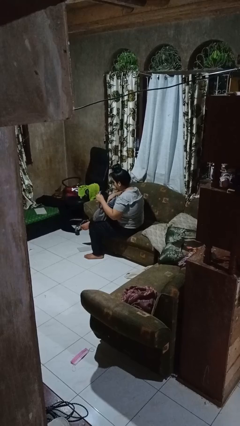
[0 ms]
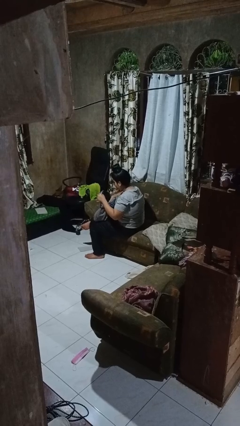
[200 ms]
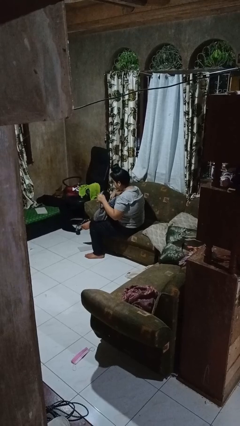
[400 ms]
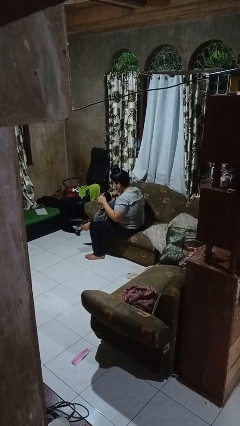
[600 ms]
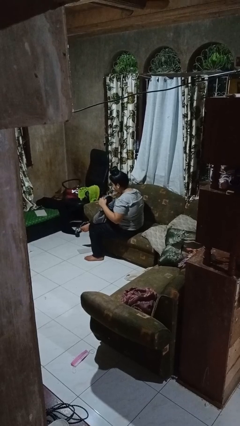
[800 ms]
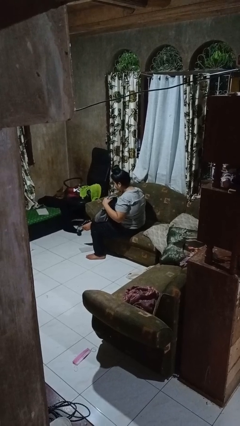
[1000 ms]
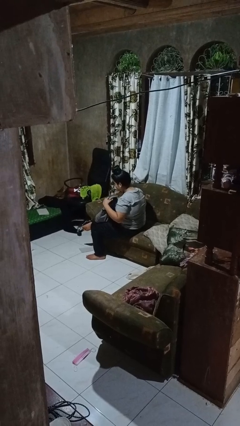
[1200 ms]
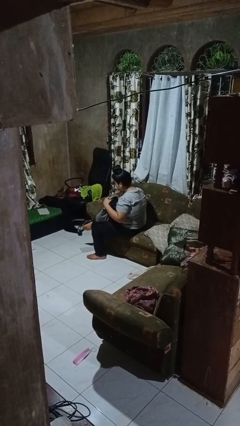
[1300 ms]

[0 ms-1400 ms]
person puts object into backpack

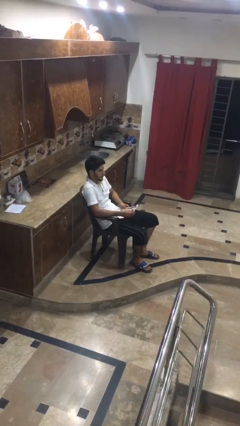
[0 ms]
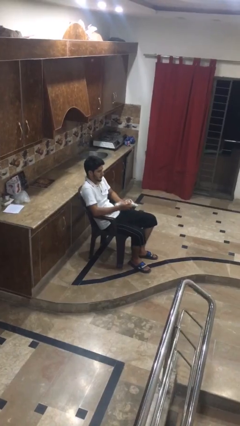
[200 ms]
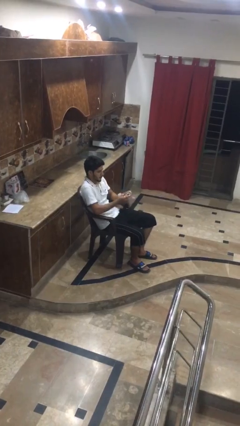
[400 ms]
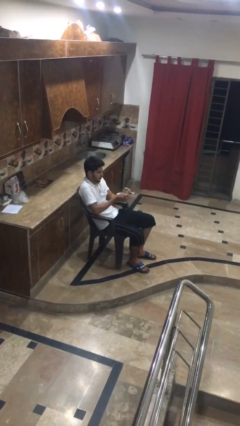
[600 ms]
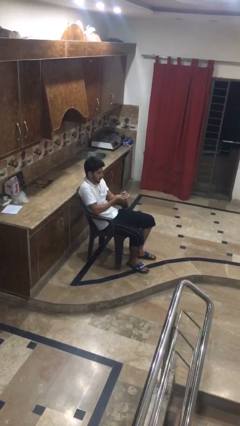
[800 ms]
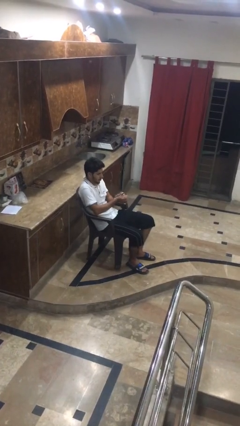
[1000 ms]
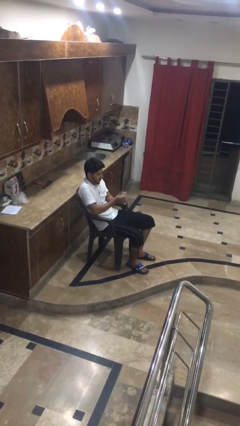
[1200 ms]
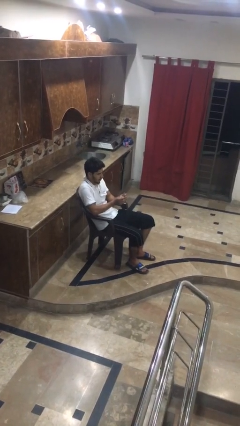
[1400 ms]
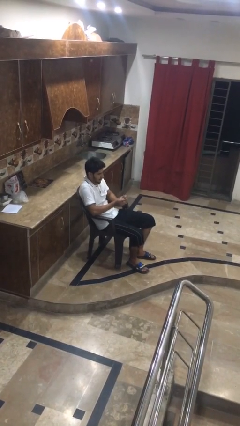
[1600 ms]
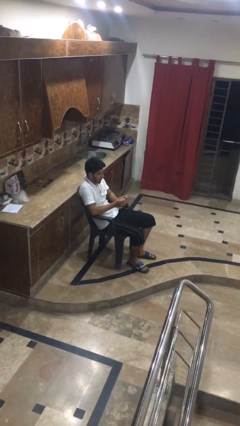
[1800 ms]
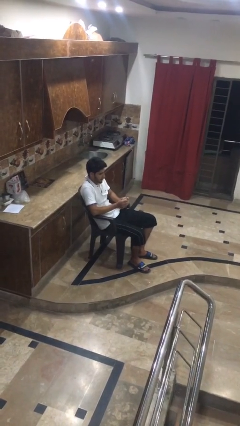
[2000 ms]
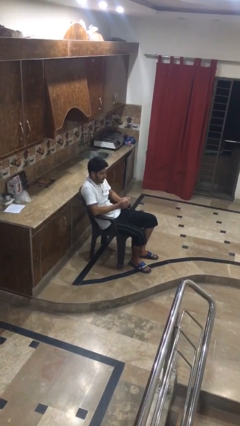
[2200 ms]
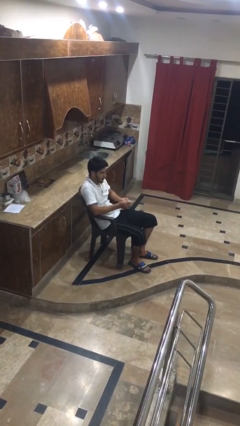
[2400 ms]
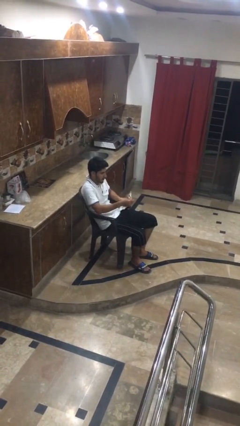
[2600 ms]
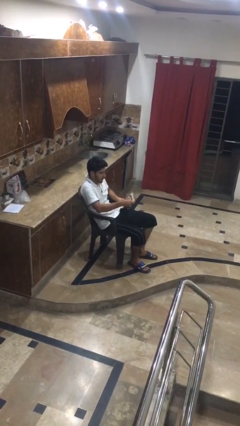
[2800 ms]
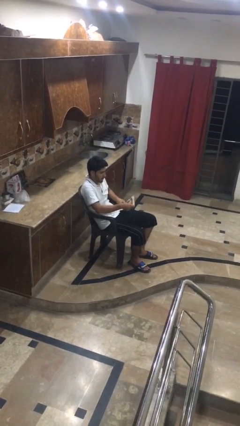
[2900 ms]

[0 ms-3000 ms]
person crumples paper

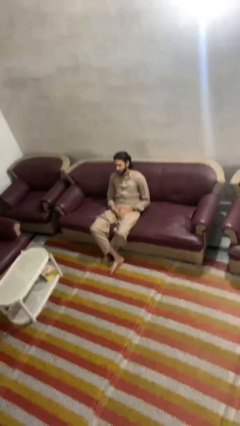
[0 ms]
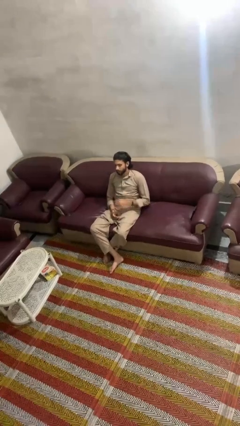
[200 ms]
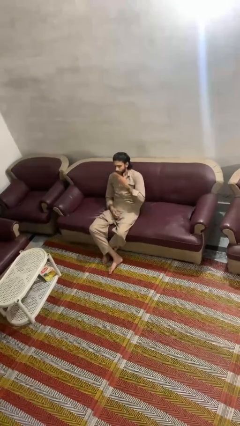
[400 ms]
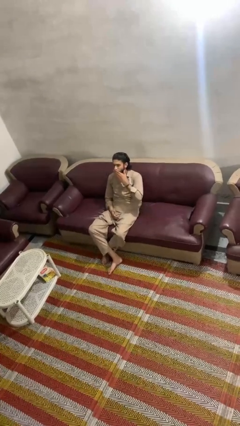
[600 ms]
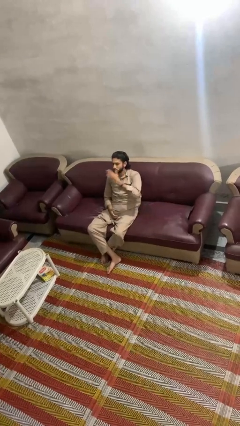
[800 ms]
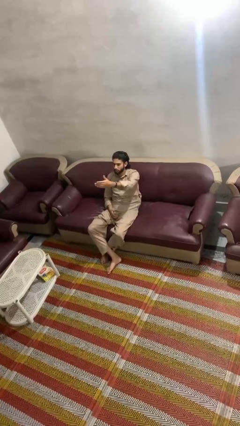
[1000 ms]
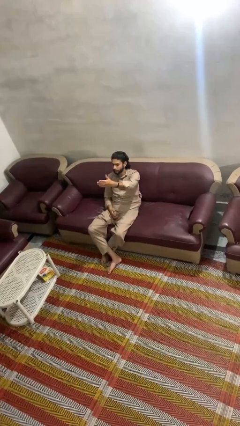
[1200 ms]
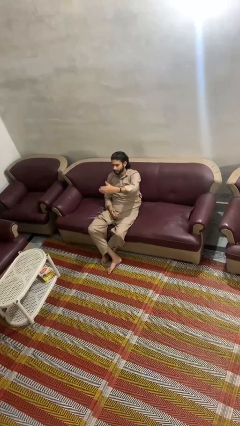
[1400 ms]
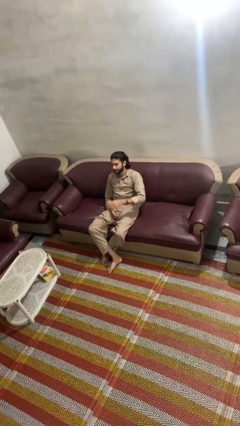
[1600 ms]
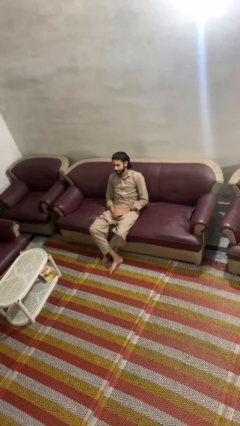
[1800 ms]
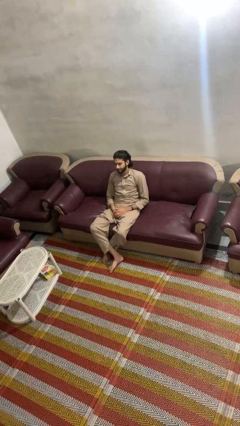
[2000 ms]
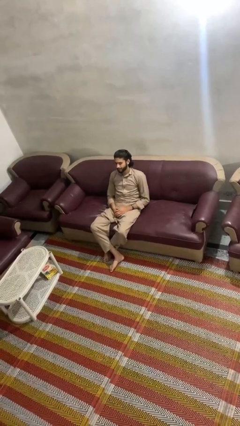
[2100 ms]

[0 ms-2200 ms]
person gestures blow kiss

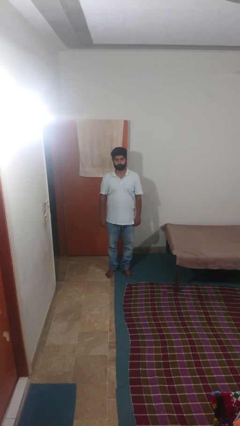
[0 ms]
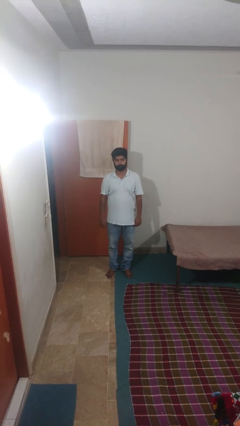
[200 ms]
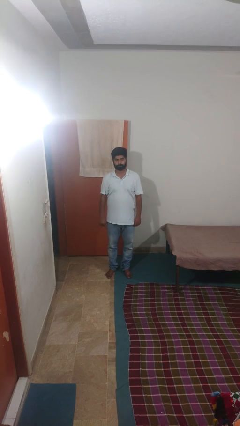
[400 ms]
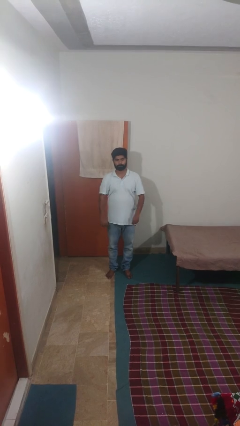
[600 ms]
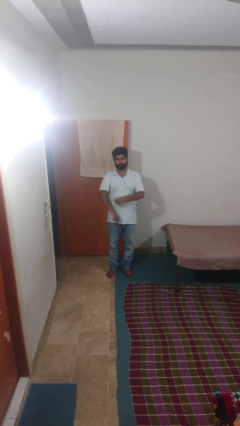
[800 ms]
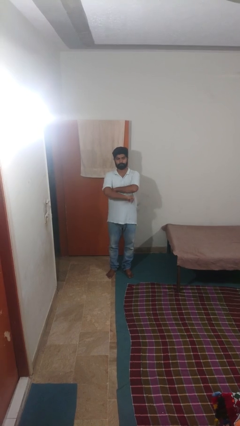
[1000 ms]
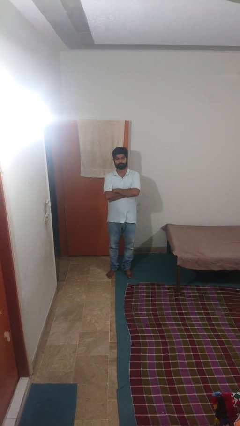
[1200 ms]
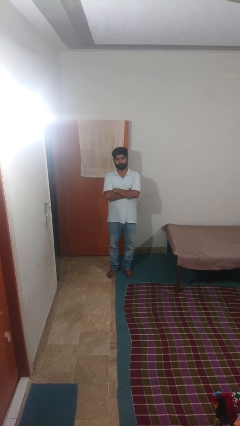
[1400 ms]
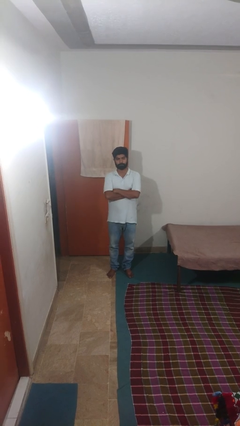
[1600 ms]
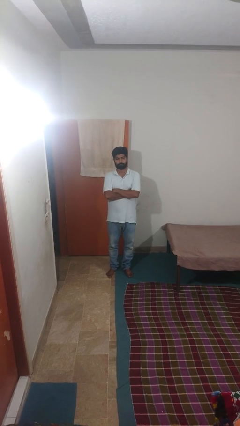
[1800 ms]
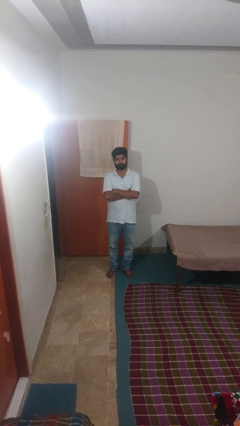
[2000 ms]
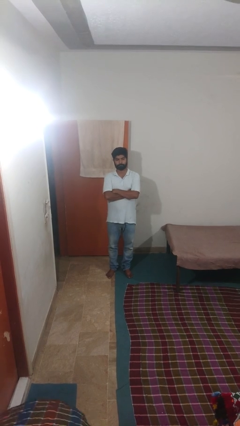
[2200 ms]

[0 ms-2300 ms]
person crosses arms

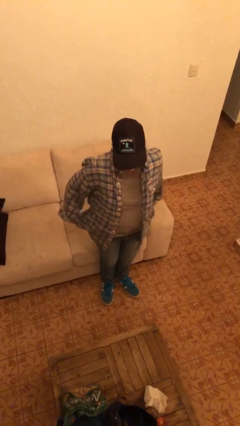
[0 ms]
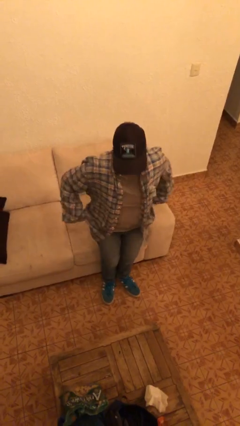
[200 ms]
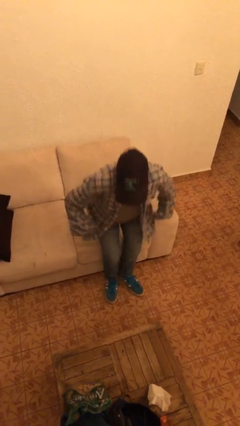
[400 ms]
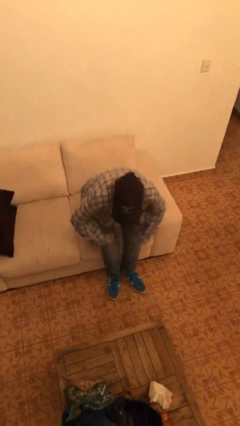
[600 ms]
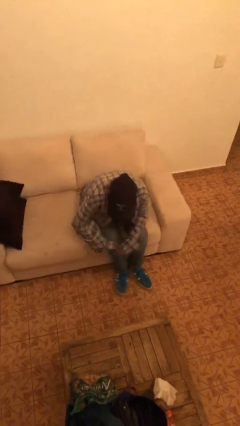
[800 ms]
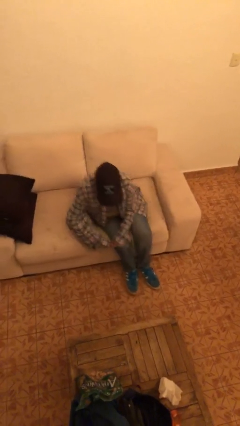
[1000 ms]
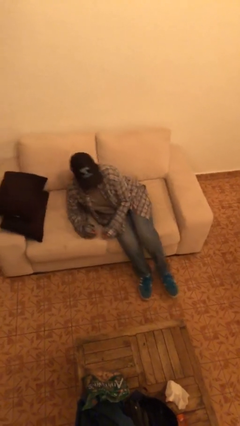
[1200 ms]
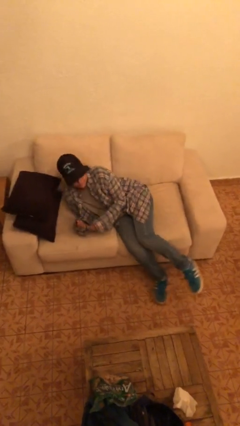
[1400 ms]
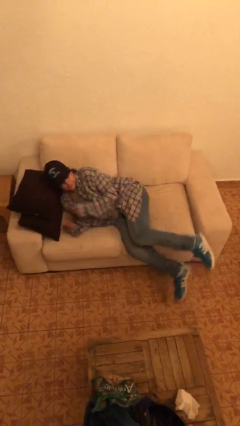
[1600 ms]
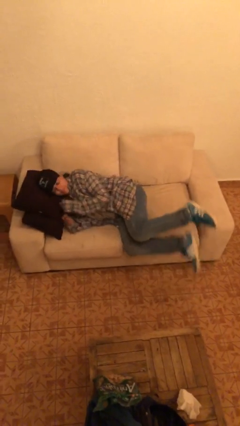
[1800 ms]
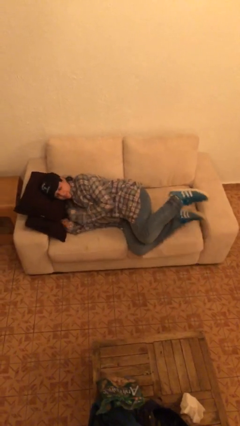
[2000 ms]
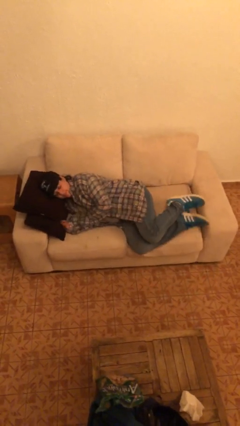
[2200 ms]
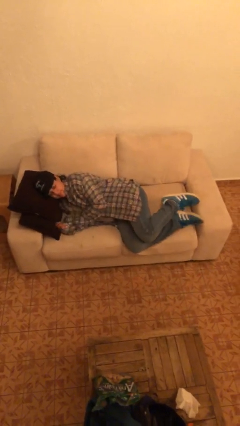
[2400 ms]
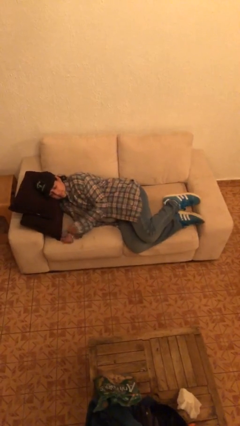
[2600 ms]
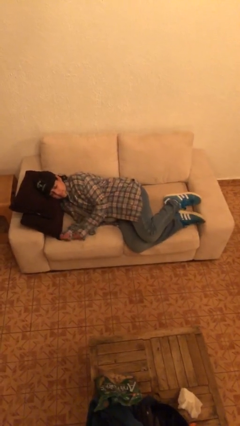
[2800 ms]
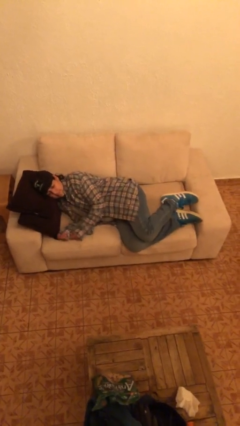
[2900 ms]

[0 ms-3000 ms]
person lies down on couch

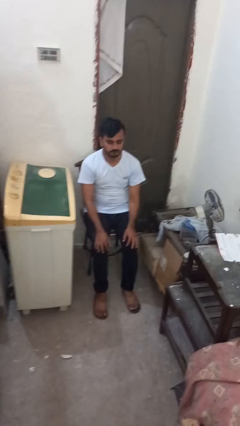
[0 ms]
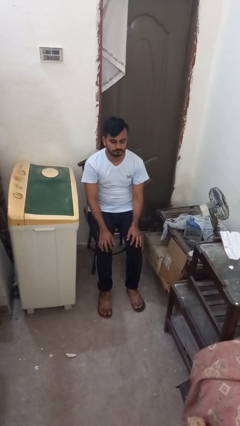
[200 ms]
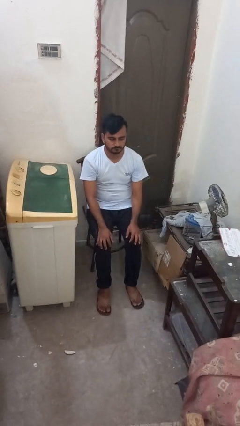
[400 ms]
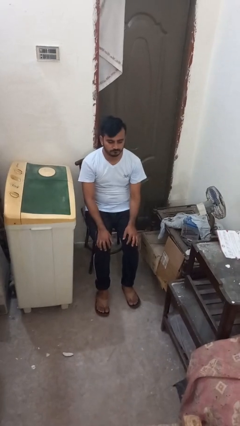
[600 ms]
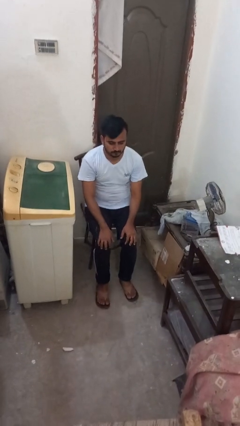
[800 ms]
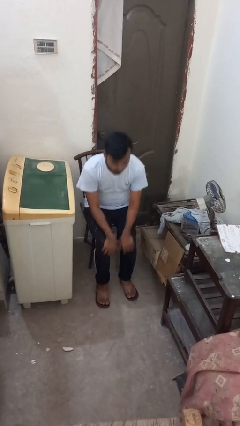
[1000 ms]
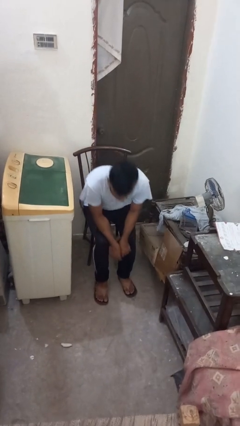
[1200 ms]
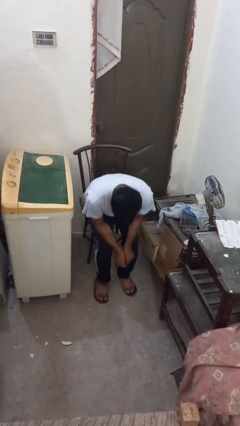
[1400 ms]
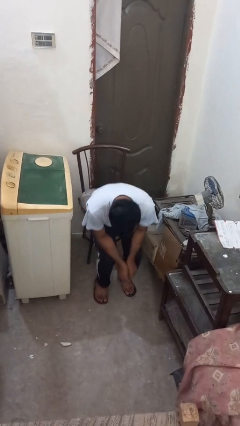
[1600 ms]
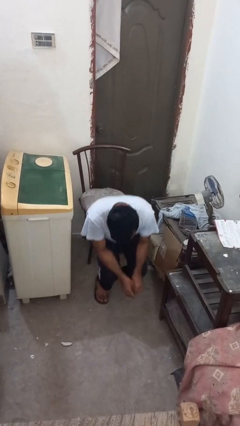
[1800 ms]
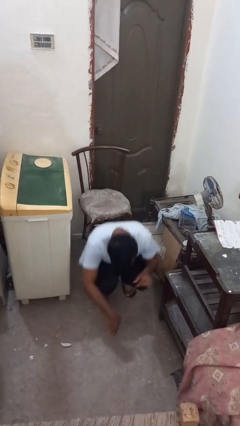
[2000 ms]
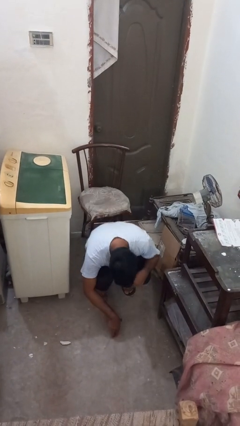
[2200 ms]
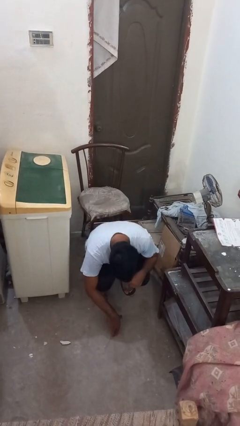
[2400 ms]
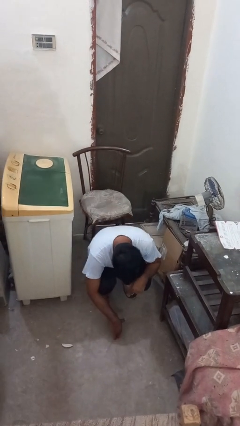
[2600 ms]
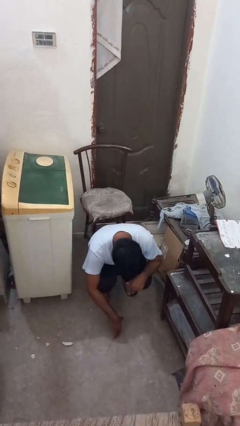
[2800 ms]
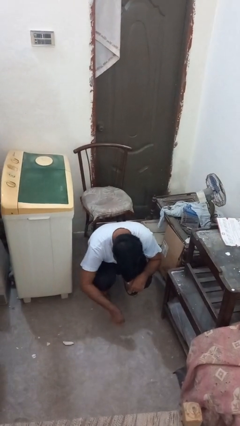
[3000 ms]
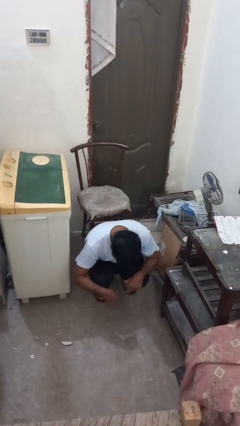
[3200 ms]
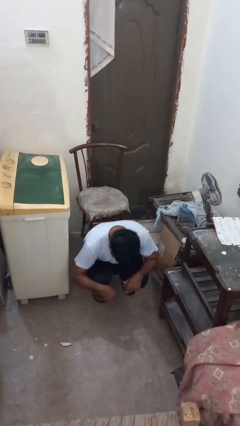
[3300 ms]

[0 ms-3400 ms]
person falls from chair

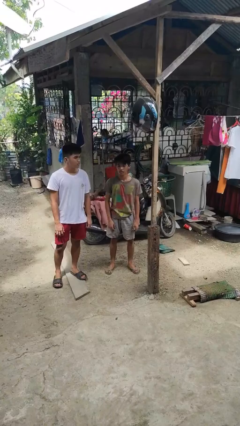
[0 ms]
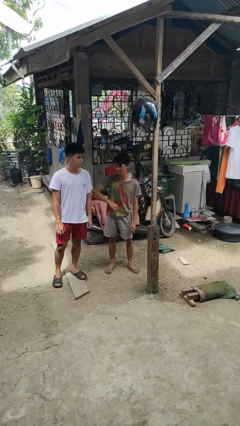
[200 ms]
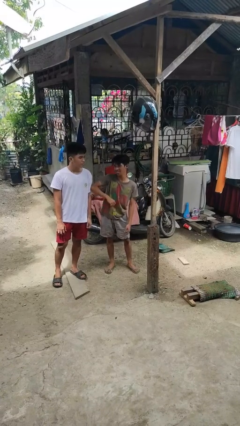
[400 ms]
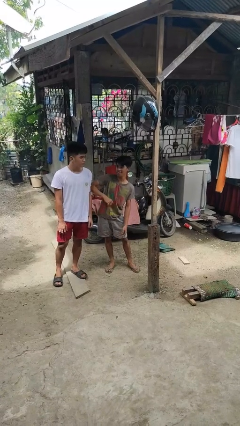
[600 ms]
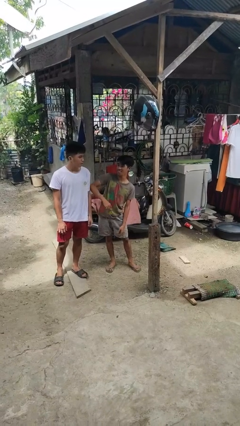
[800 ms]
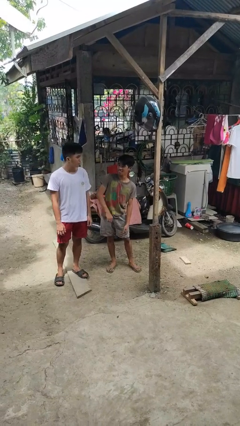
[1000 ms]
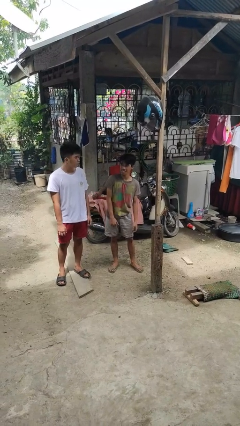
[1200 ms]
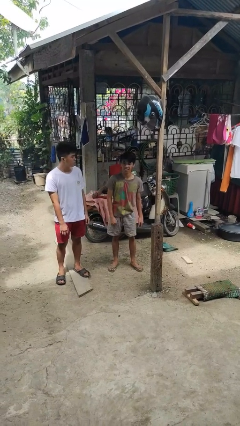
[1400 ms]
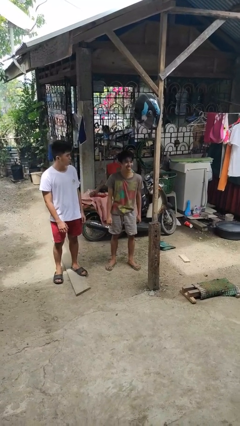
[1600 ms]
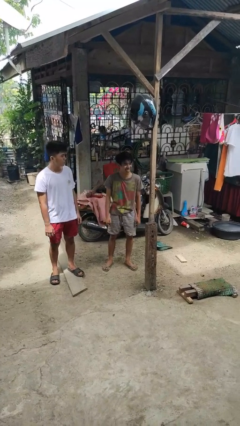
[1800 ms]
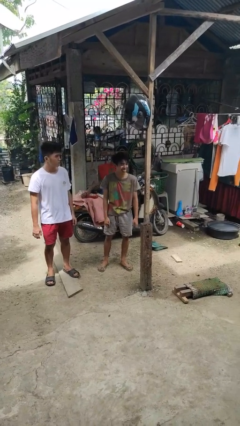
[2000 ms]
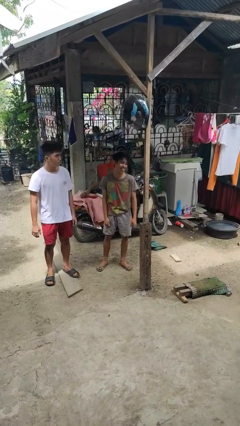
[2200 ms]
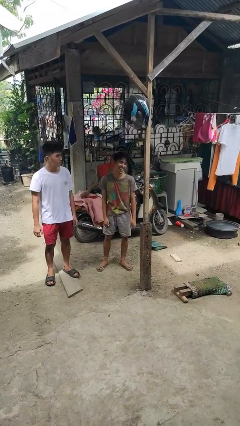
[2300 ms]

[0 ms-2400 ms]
person nudges person with elbow
